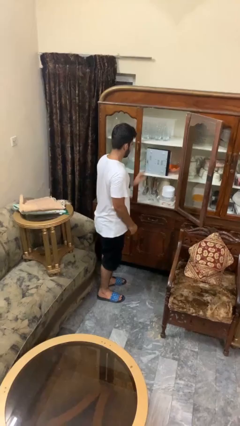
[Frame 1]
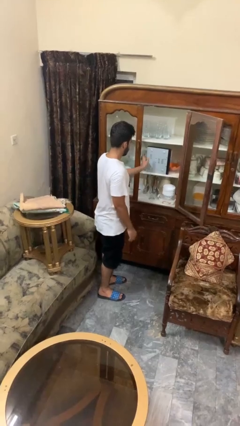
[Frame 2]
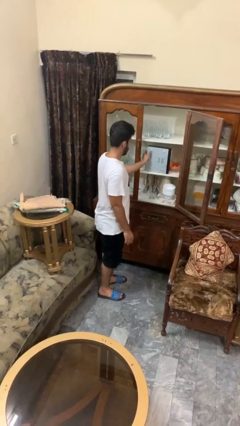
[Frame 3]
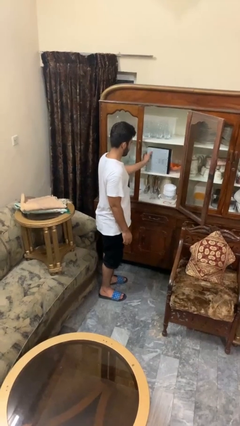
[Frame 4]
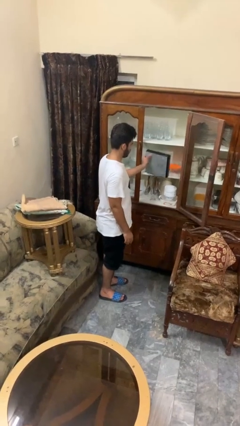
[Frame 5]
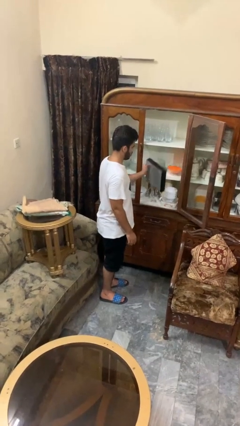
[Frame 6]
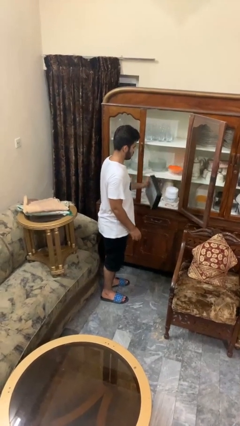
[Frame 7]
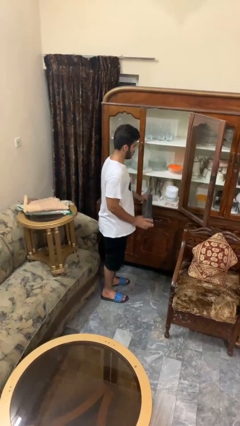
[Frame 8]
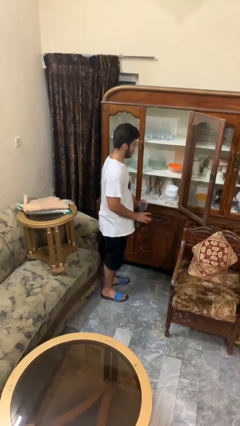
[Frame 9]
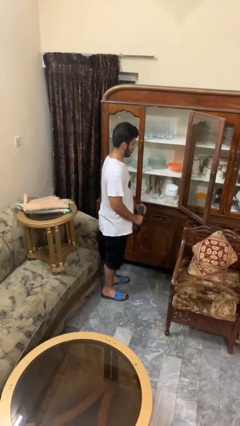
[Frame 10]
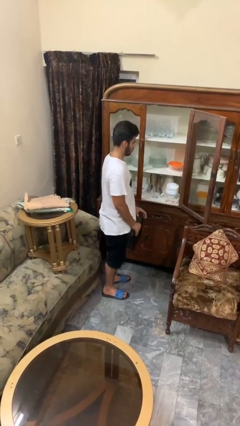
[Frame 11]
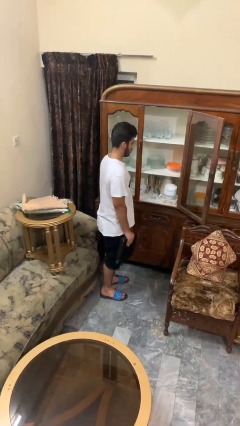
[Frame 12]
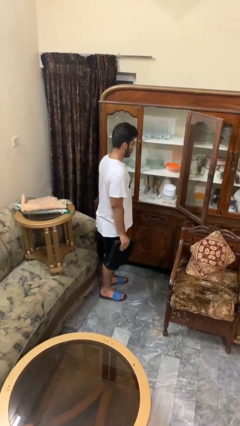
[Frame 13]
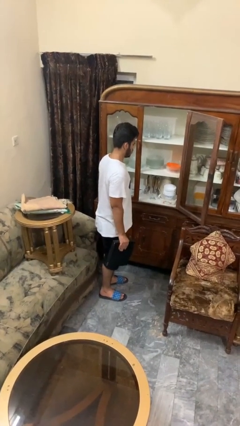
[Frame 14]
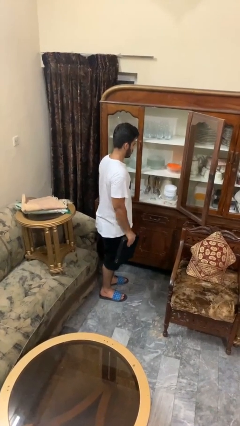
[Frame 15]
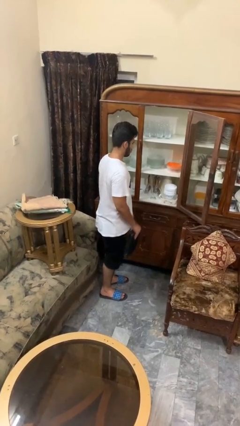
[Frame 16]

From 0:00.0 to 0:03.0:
person picks up object from cabinet

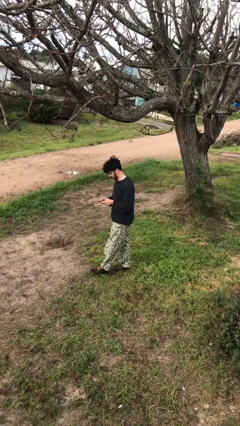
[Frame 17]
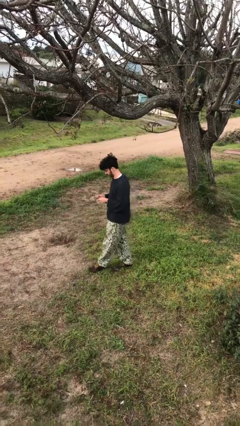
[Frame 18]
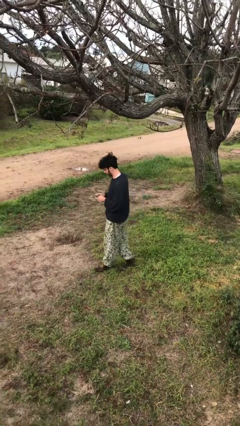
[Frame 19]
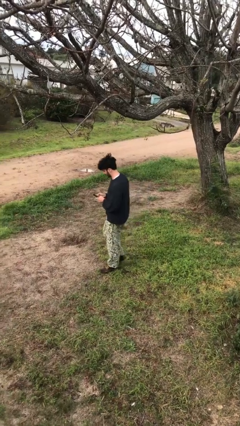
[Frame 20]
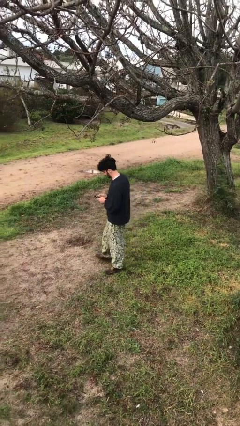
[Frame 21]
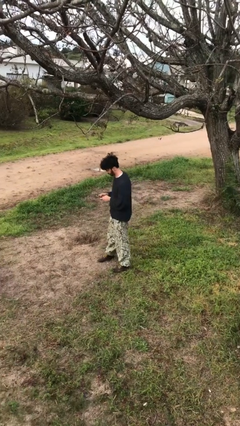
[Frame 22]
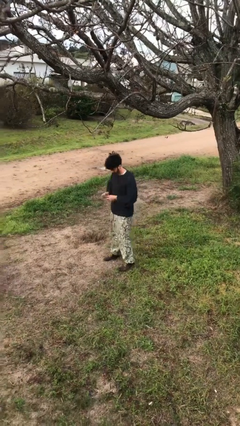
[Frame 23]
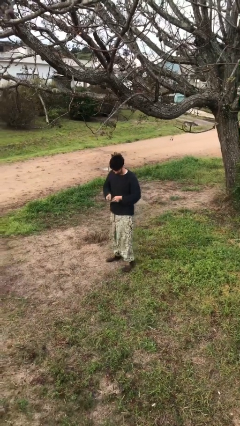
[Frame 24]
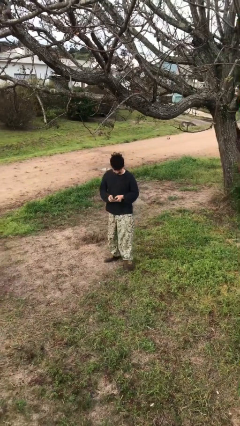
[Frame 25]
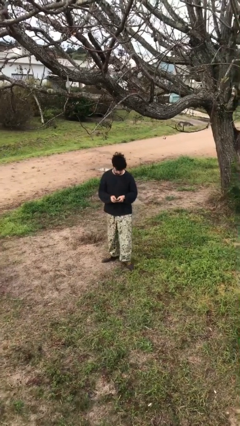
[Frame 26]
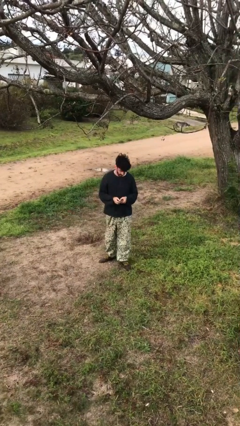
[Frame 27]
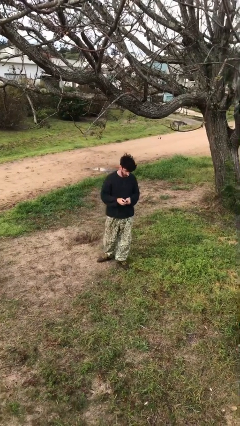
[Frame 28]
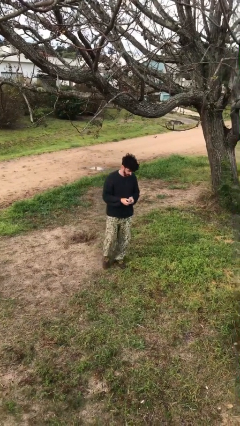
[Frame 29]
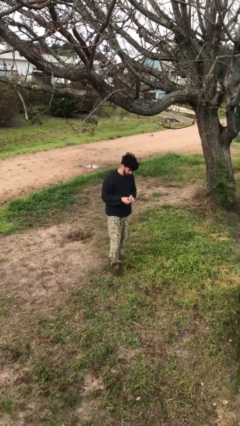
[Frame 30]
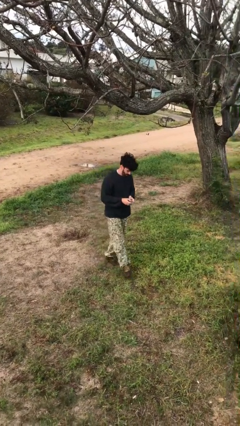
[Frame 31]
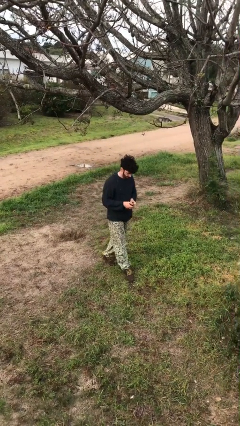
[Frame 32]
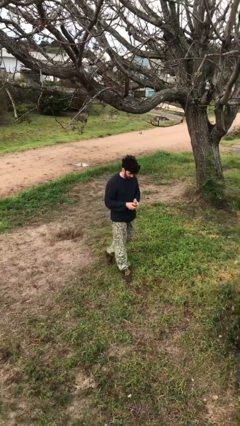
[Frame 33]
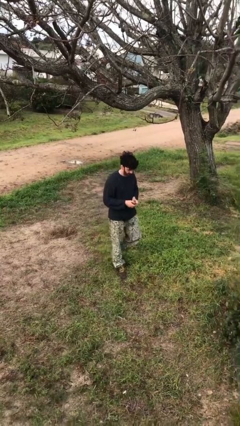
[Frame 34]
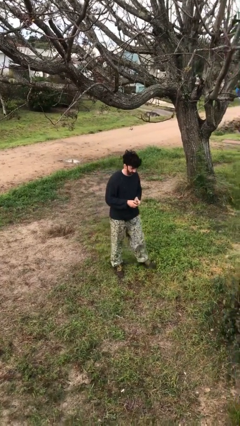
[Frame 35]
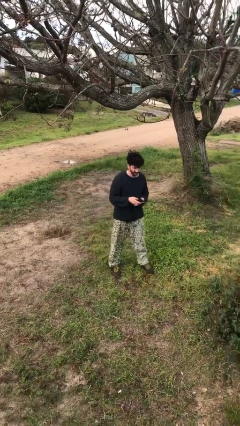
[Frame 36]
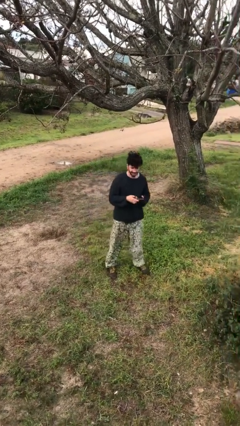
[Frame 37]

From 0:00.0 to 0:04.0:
person texts on phone

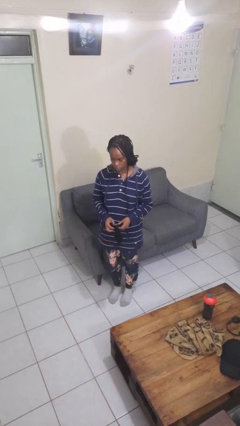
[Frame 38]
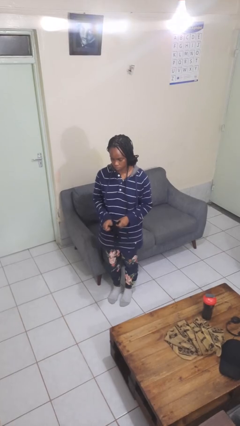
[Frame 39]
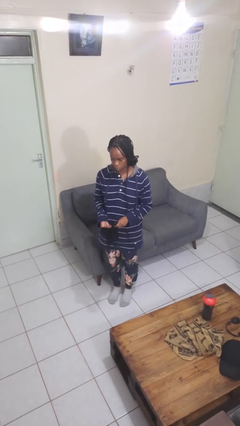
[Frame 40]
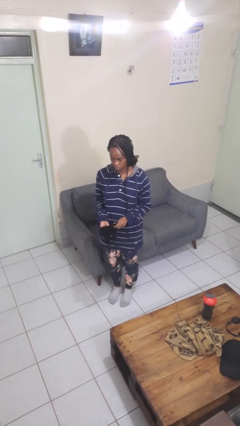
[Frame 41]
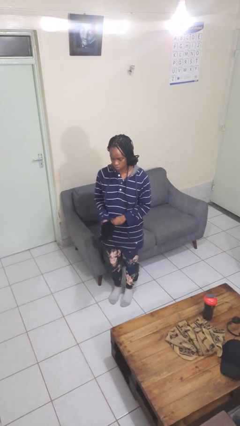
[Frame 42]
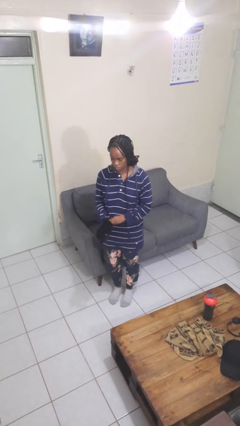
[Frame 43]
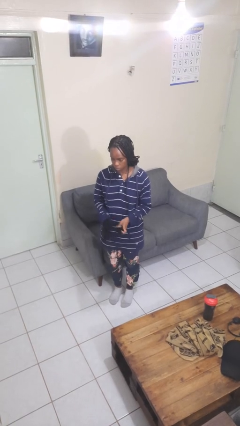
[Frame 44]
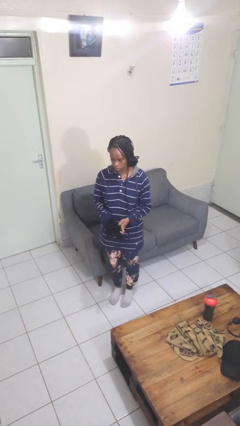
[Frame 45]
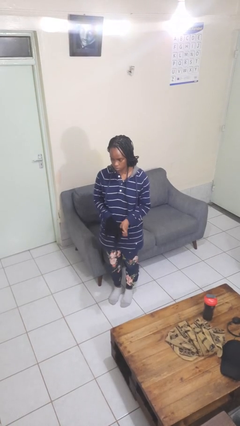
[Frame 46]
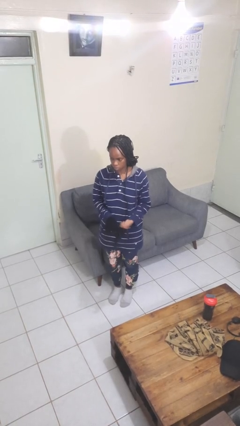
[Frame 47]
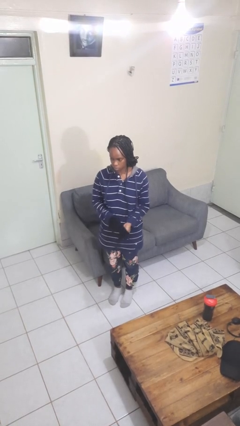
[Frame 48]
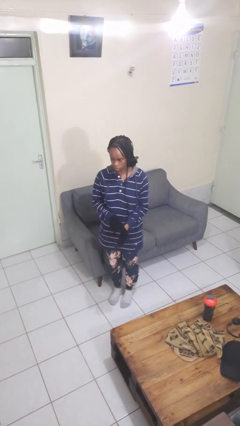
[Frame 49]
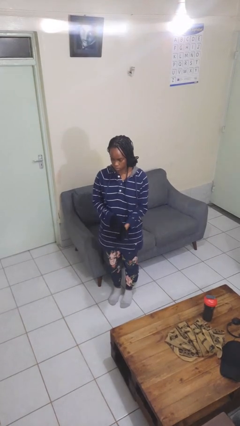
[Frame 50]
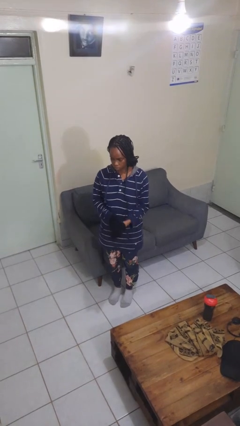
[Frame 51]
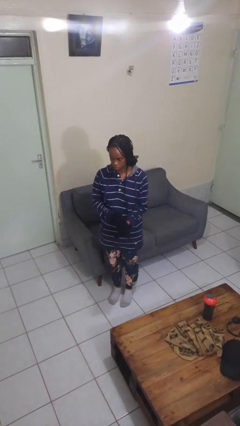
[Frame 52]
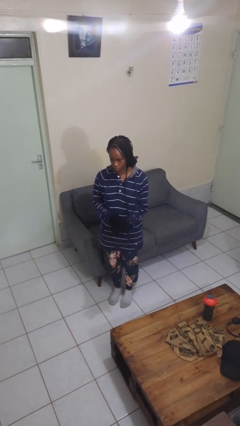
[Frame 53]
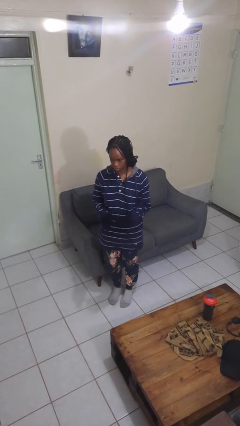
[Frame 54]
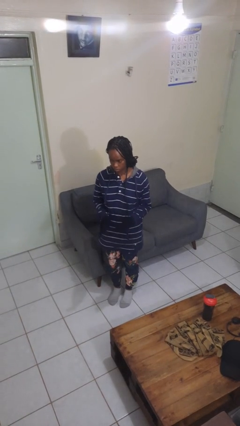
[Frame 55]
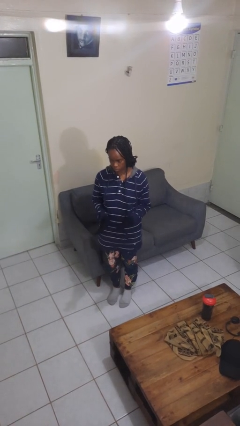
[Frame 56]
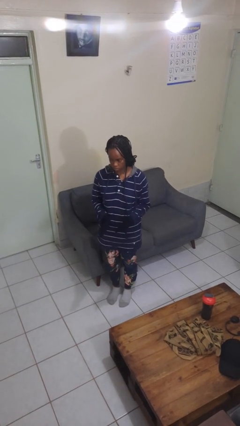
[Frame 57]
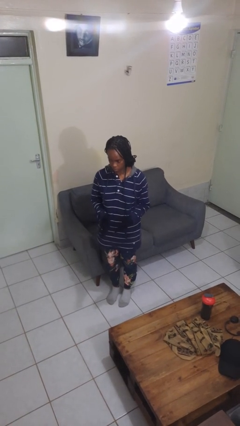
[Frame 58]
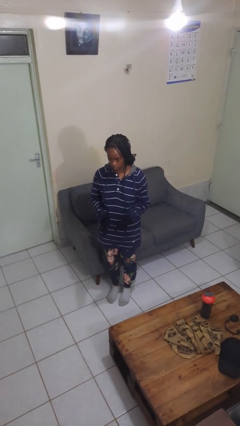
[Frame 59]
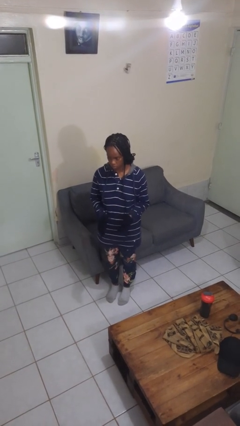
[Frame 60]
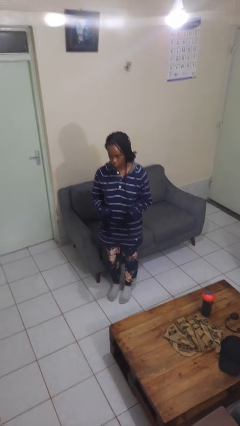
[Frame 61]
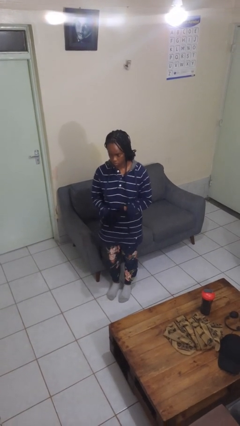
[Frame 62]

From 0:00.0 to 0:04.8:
person puts on gloves

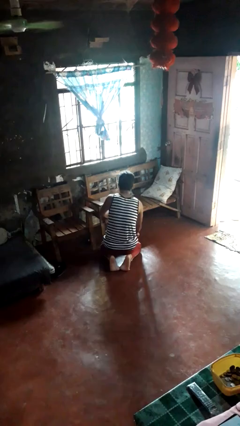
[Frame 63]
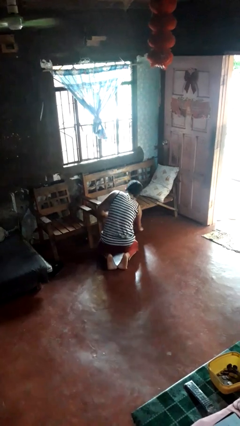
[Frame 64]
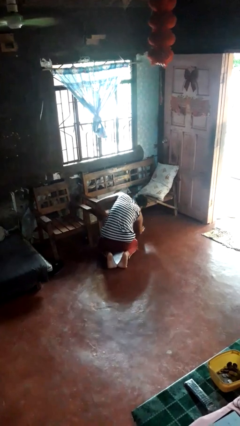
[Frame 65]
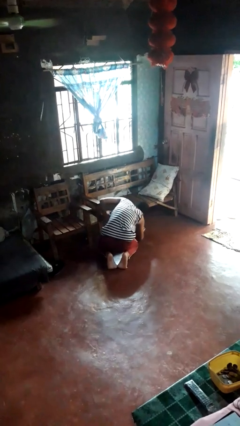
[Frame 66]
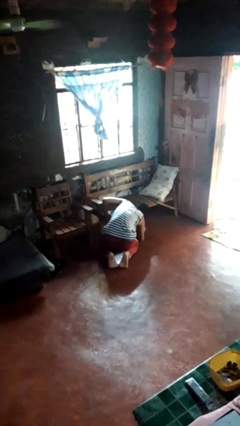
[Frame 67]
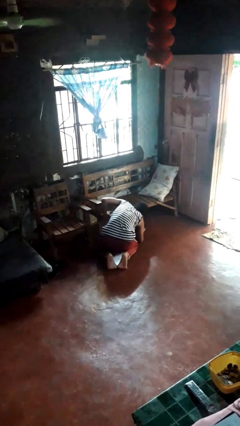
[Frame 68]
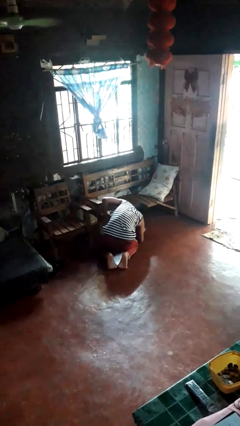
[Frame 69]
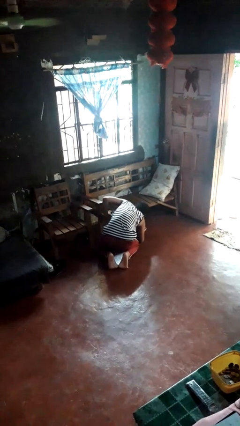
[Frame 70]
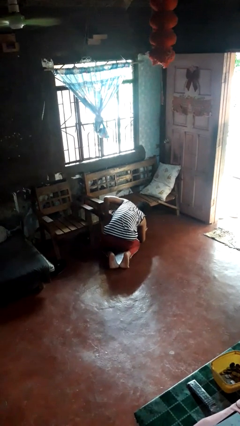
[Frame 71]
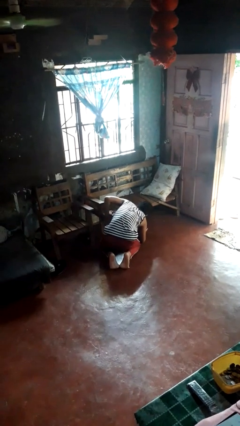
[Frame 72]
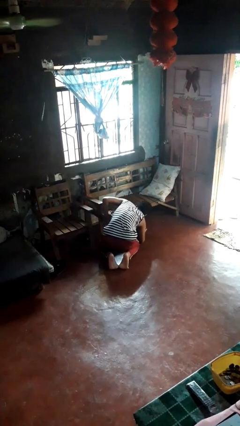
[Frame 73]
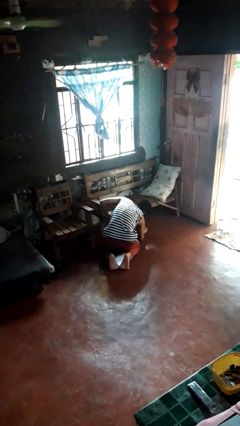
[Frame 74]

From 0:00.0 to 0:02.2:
person searches in couch

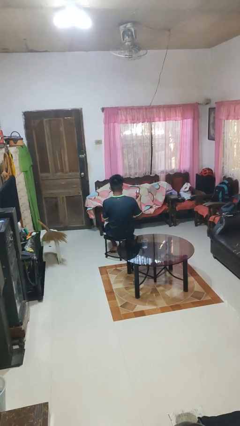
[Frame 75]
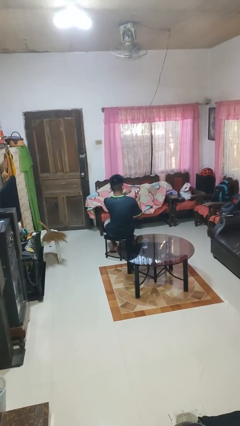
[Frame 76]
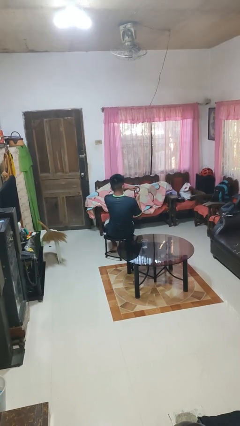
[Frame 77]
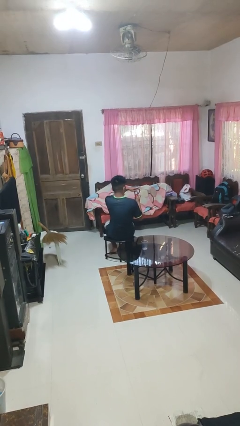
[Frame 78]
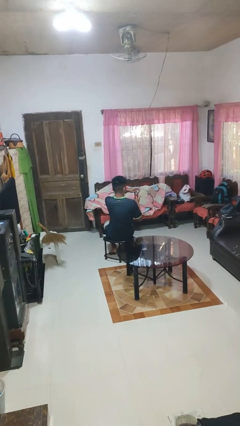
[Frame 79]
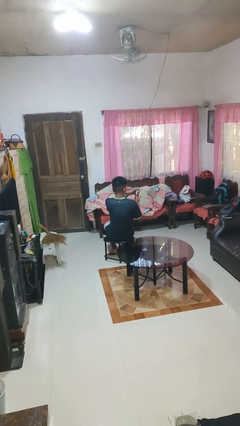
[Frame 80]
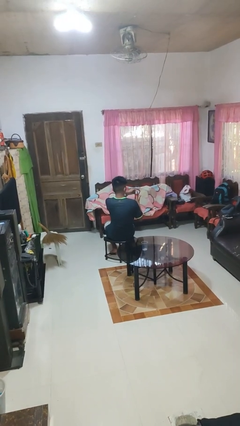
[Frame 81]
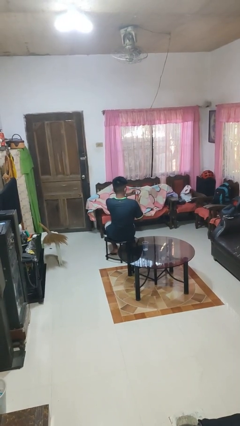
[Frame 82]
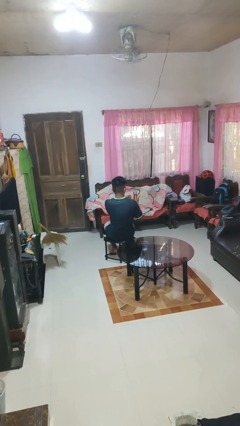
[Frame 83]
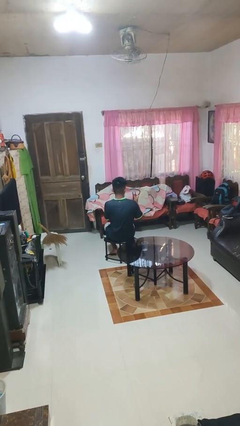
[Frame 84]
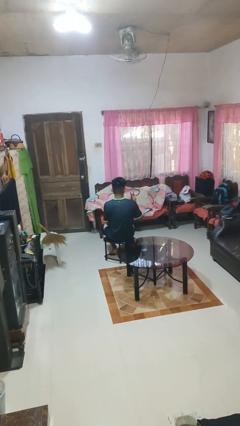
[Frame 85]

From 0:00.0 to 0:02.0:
person opens beverage can

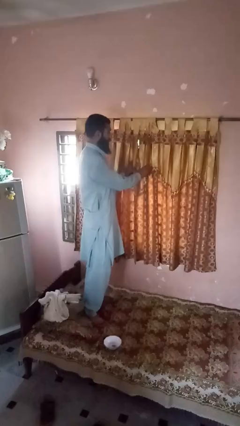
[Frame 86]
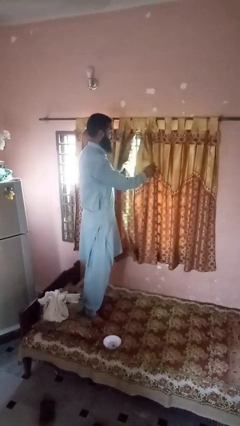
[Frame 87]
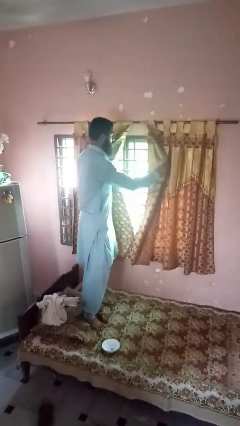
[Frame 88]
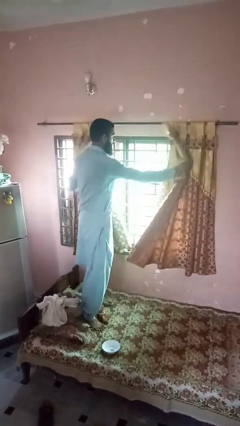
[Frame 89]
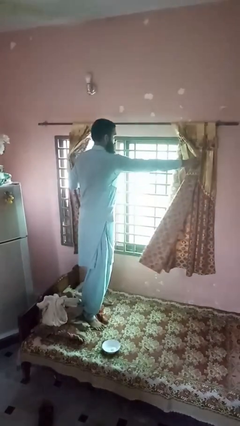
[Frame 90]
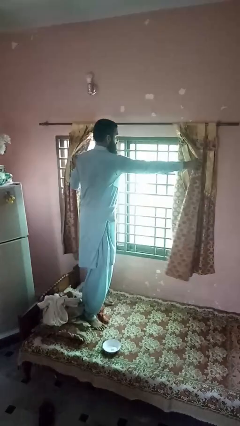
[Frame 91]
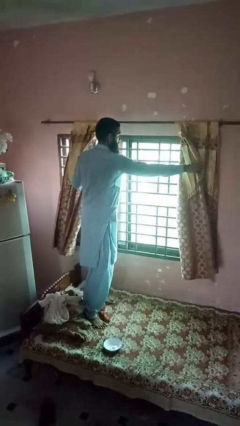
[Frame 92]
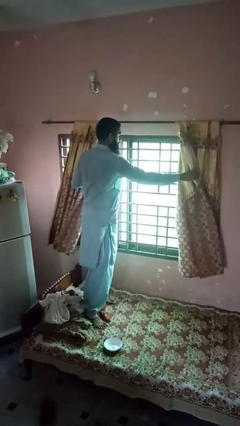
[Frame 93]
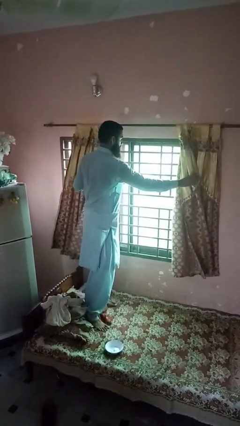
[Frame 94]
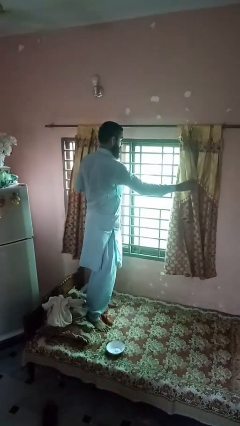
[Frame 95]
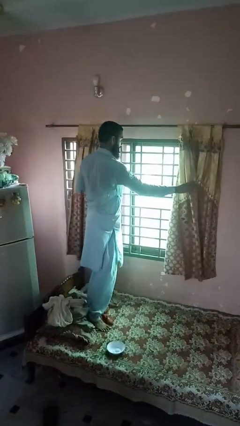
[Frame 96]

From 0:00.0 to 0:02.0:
person opens curtains
